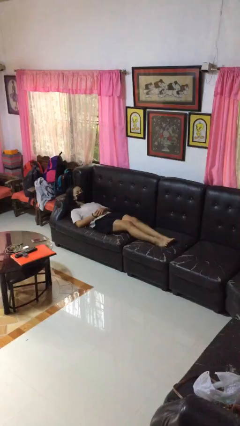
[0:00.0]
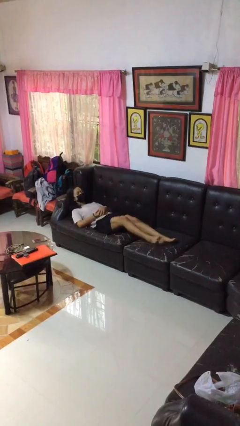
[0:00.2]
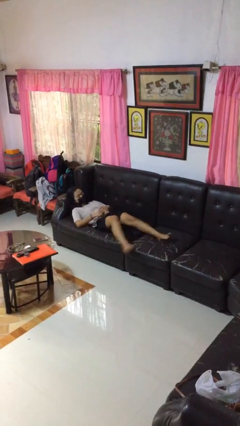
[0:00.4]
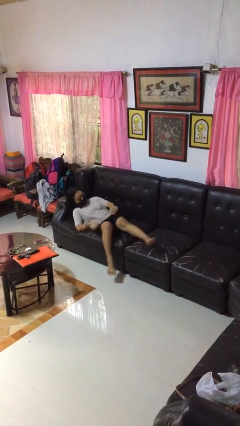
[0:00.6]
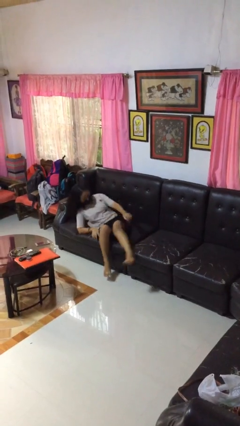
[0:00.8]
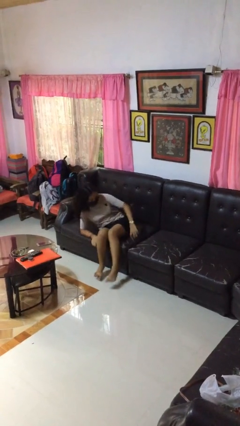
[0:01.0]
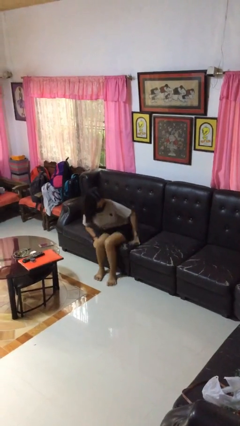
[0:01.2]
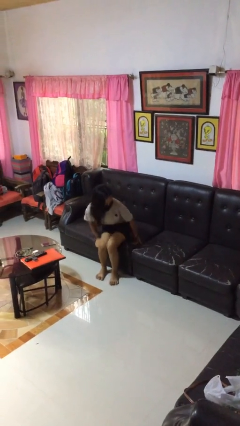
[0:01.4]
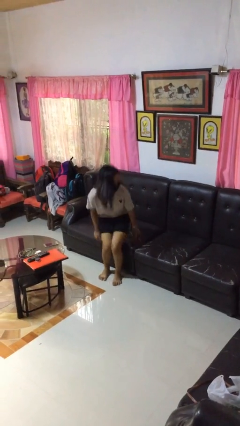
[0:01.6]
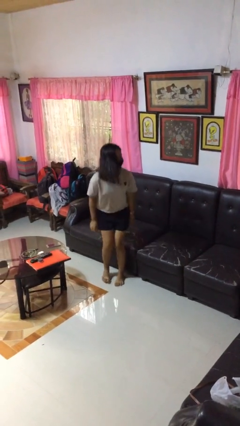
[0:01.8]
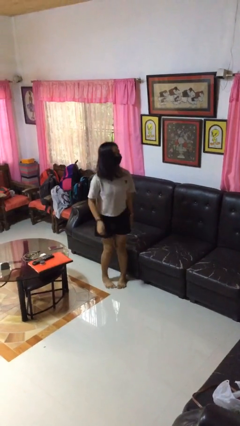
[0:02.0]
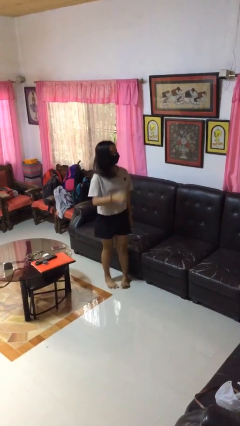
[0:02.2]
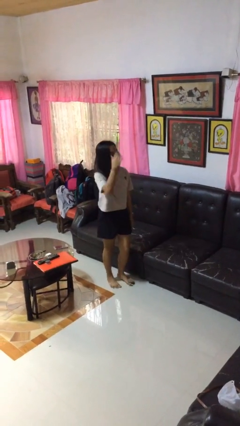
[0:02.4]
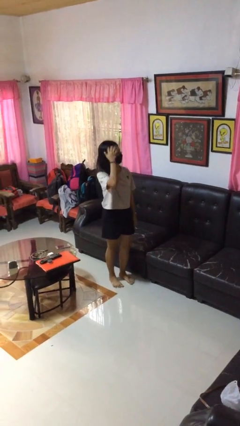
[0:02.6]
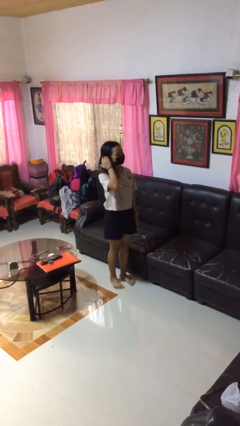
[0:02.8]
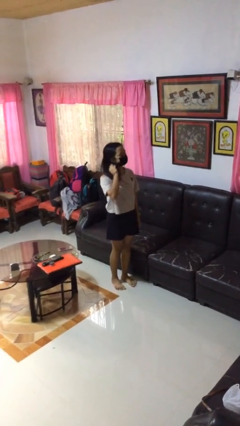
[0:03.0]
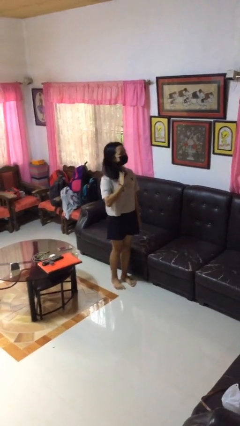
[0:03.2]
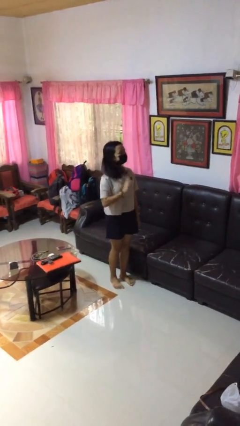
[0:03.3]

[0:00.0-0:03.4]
person stands up

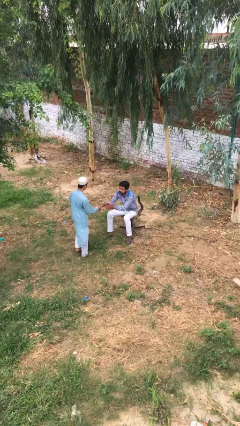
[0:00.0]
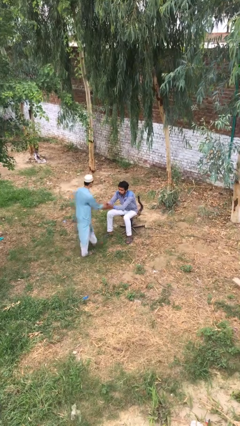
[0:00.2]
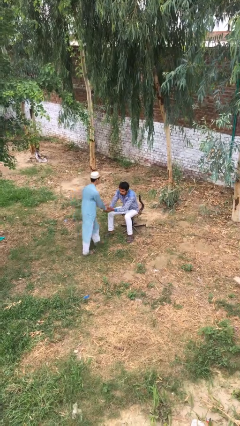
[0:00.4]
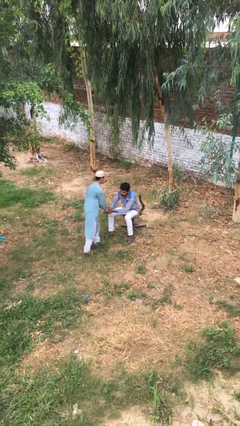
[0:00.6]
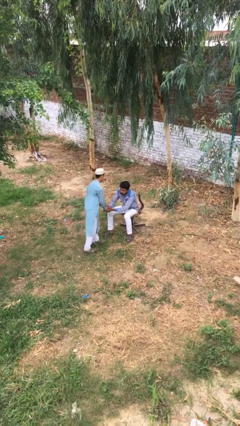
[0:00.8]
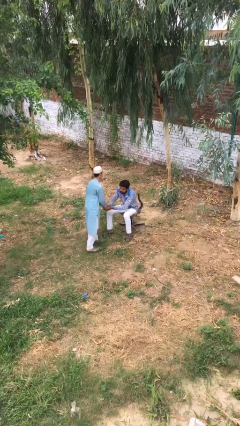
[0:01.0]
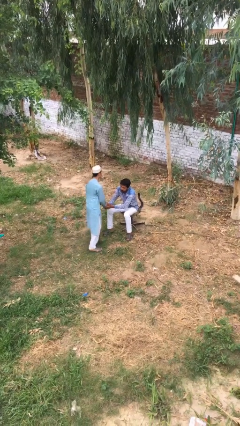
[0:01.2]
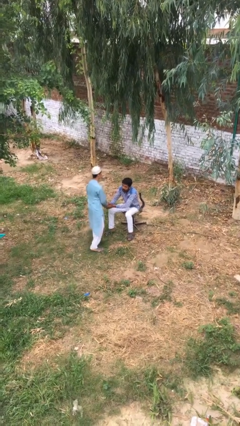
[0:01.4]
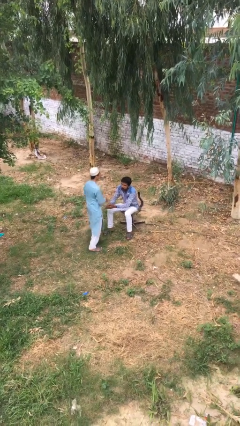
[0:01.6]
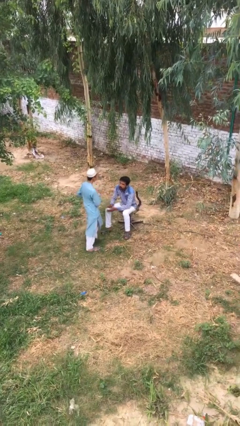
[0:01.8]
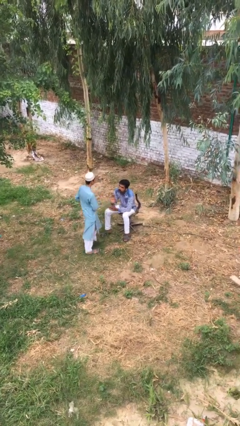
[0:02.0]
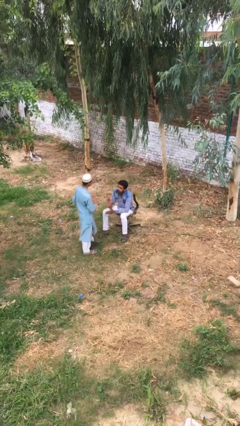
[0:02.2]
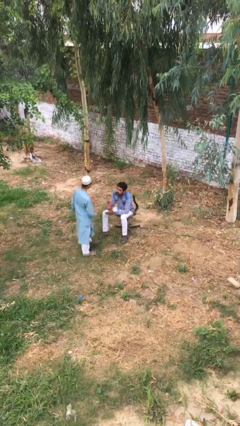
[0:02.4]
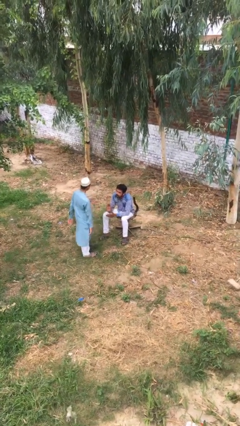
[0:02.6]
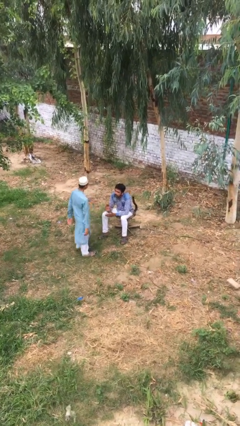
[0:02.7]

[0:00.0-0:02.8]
person shakes hand

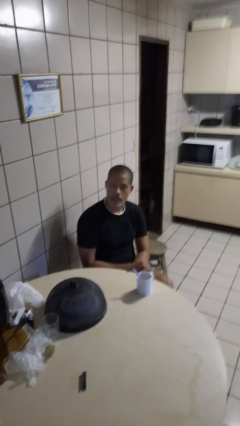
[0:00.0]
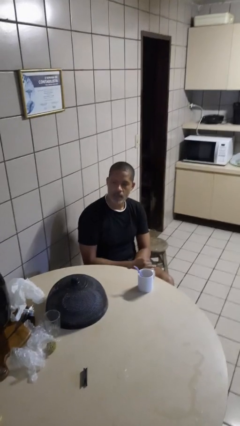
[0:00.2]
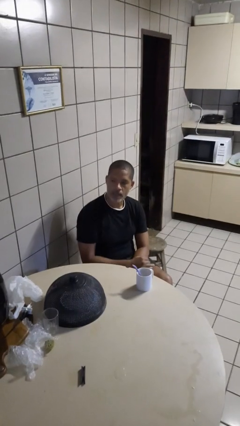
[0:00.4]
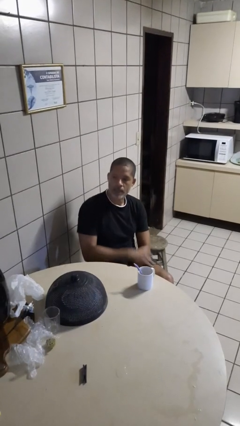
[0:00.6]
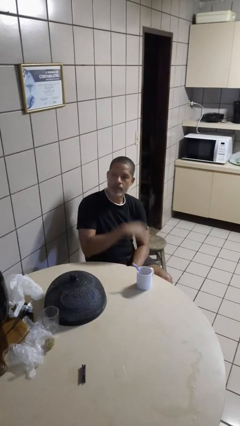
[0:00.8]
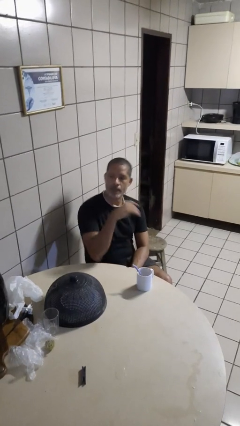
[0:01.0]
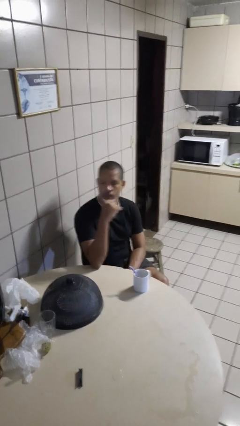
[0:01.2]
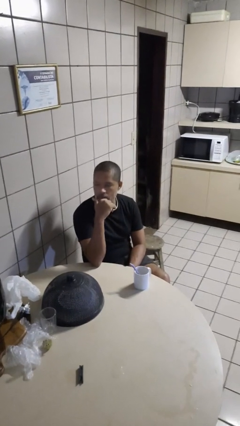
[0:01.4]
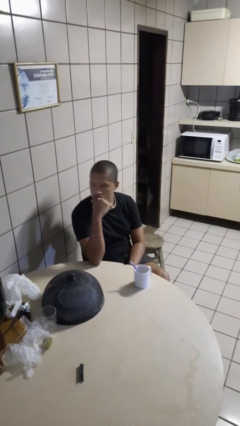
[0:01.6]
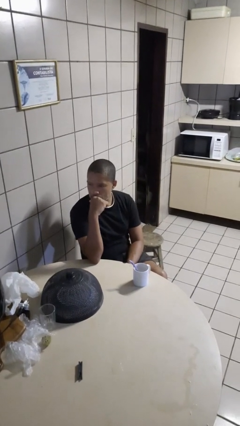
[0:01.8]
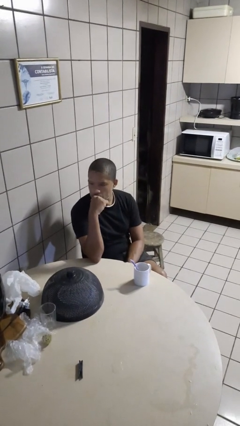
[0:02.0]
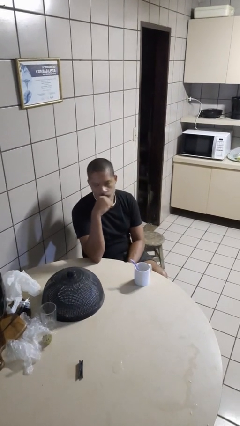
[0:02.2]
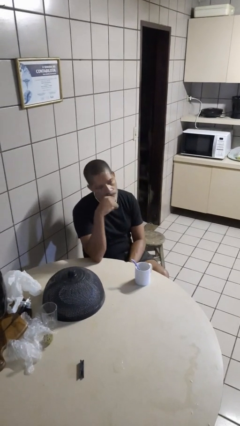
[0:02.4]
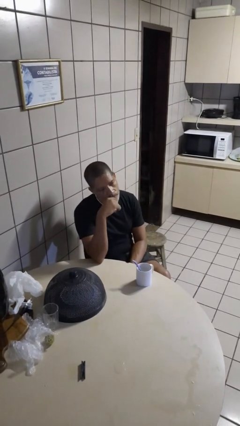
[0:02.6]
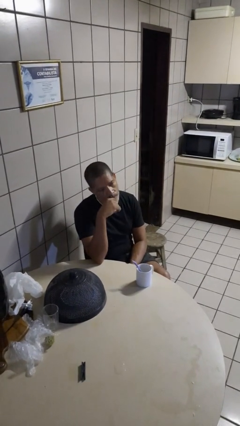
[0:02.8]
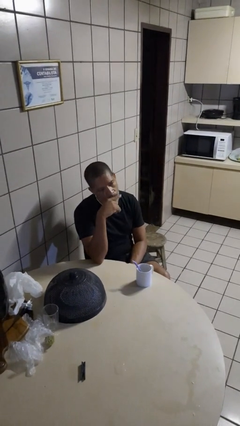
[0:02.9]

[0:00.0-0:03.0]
person strokes chin

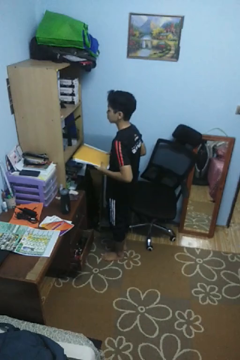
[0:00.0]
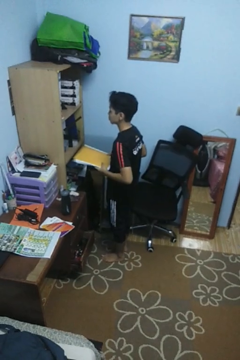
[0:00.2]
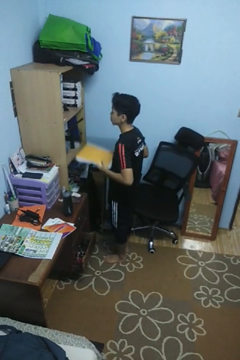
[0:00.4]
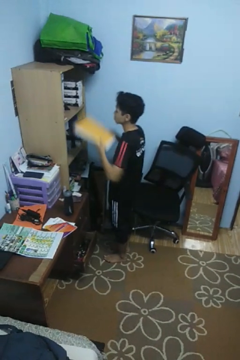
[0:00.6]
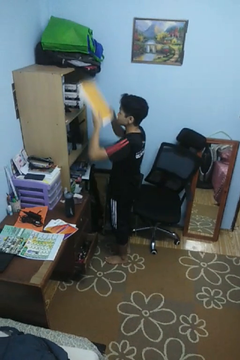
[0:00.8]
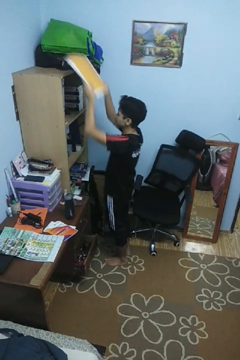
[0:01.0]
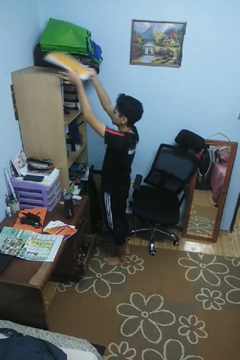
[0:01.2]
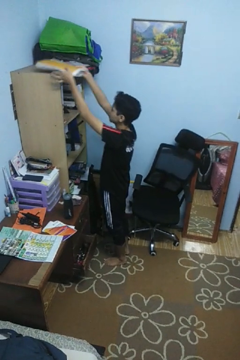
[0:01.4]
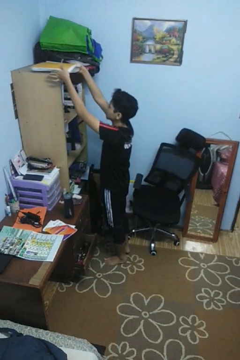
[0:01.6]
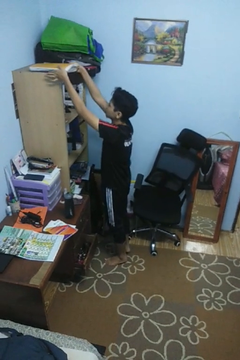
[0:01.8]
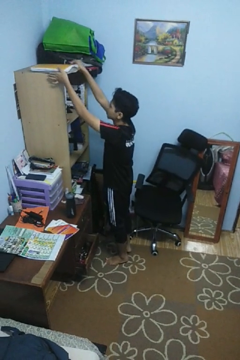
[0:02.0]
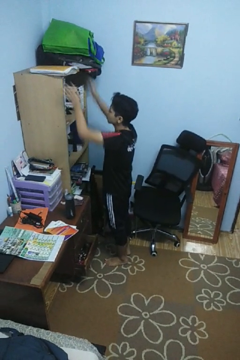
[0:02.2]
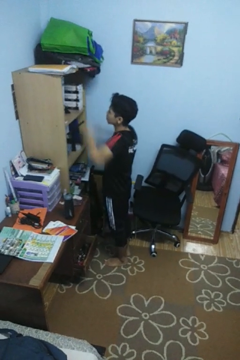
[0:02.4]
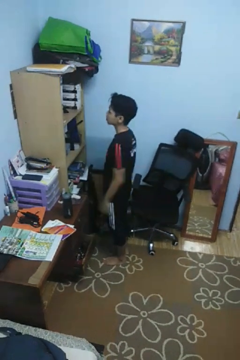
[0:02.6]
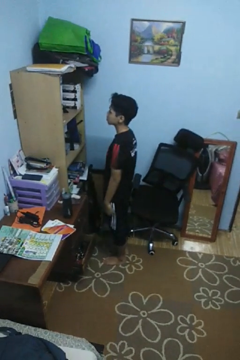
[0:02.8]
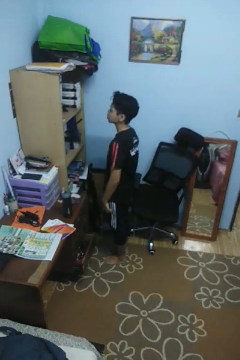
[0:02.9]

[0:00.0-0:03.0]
person puts down object on shelf

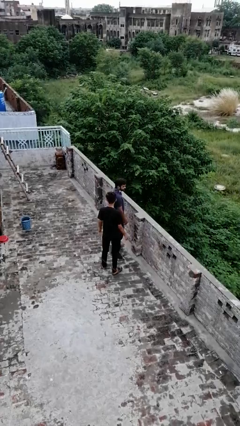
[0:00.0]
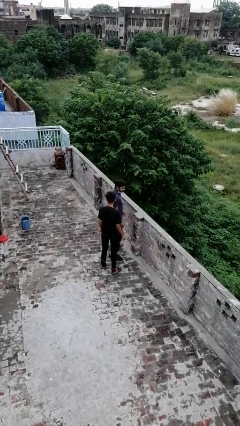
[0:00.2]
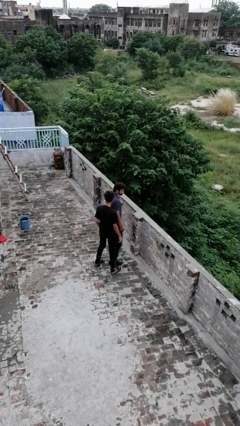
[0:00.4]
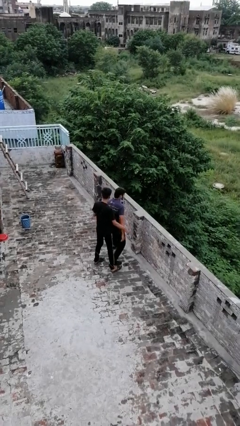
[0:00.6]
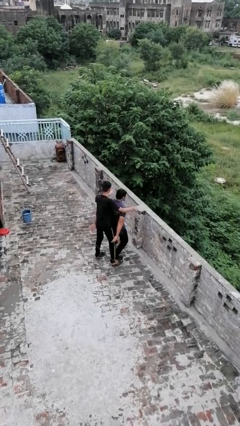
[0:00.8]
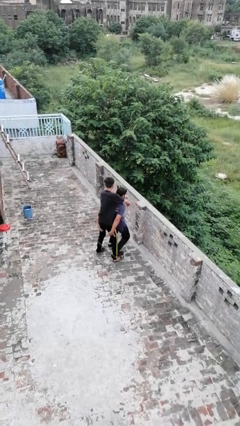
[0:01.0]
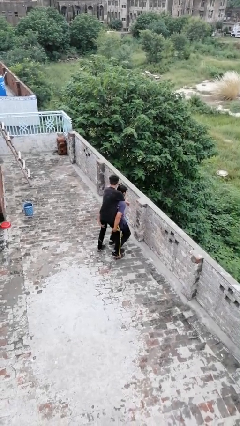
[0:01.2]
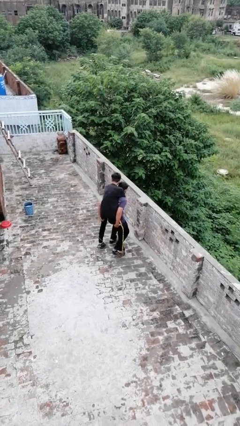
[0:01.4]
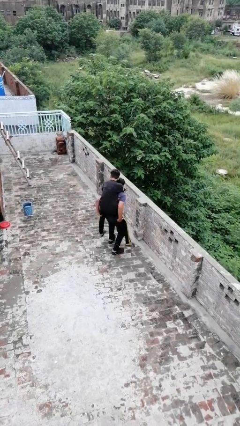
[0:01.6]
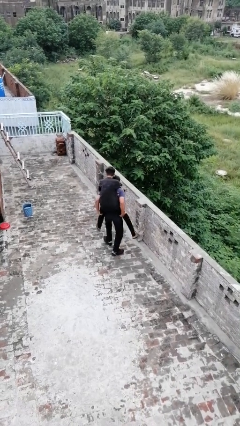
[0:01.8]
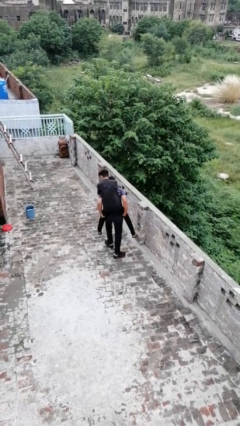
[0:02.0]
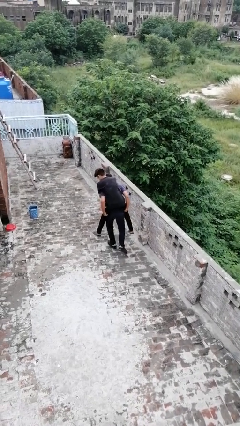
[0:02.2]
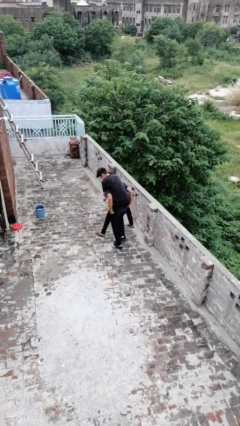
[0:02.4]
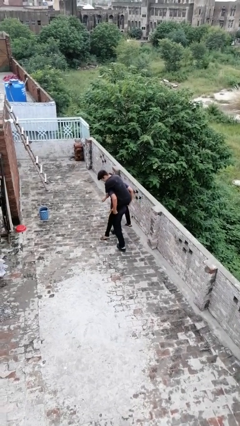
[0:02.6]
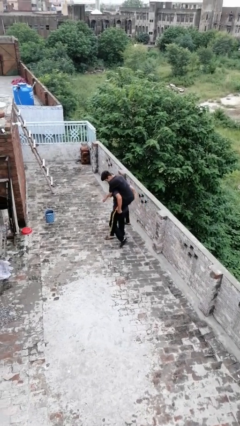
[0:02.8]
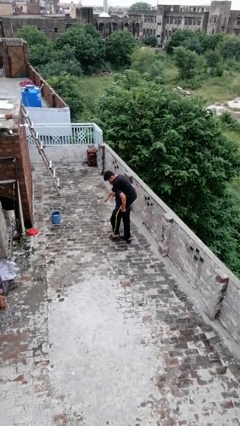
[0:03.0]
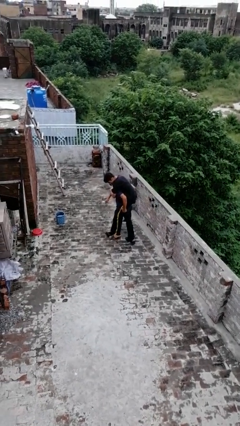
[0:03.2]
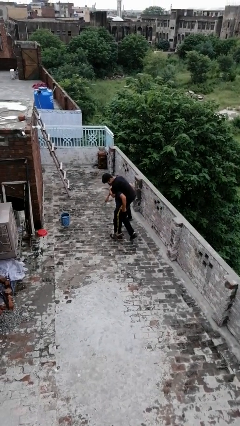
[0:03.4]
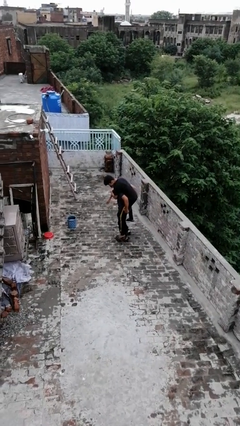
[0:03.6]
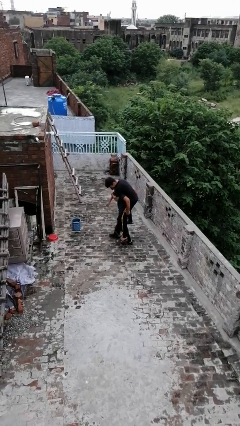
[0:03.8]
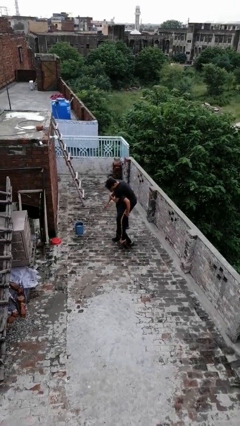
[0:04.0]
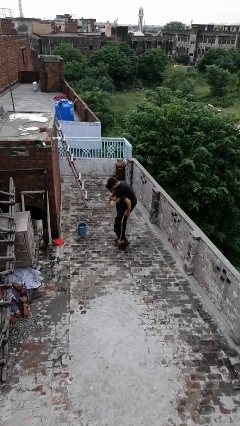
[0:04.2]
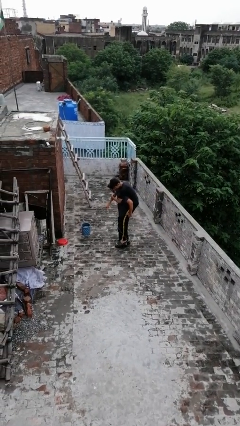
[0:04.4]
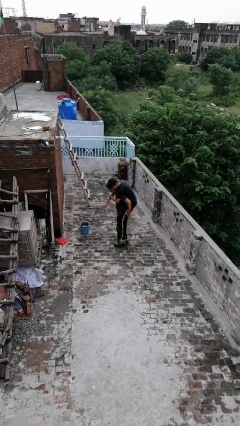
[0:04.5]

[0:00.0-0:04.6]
person carries person on back

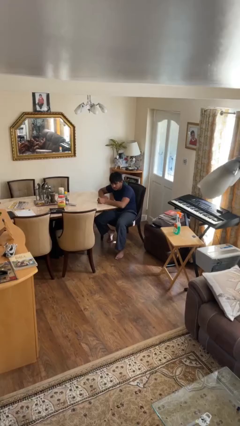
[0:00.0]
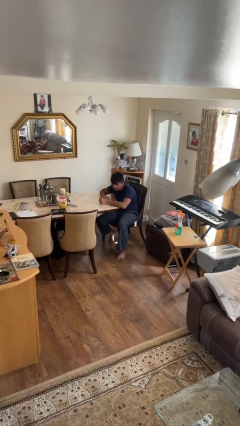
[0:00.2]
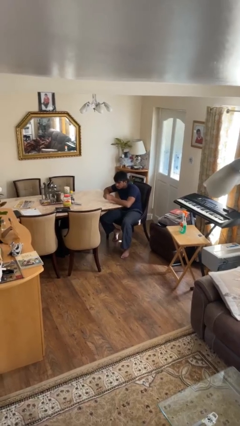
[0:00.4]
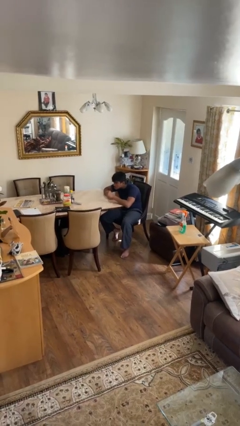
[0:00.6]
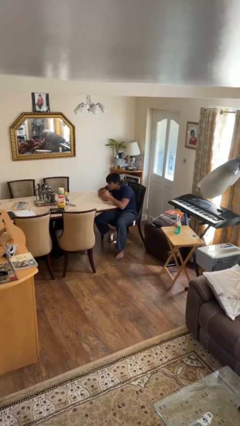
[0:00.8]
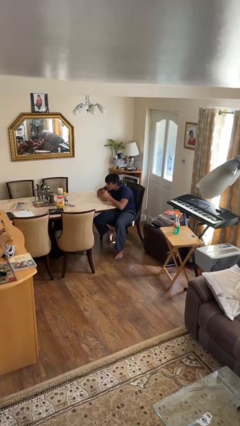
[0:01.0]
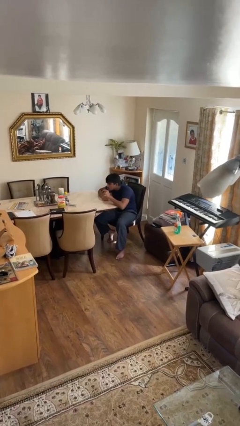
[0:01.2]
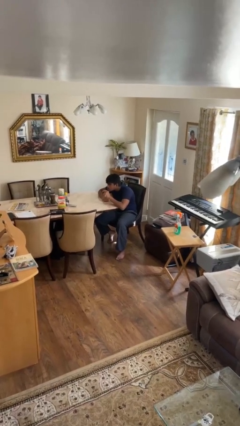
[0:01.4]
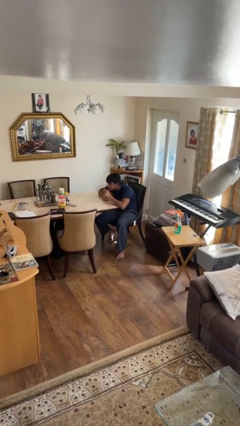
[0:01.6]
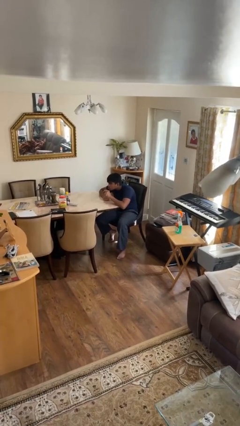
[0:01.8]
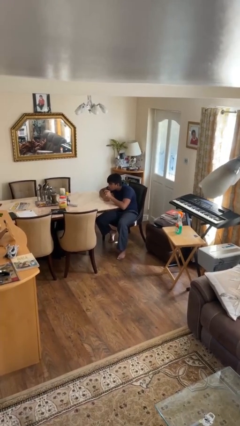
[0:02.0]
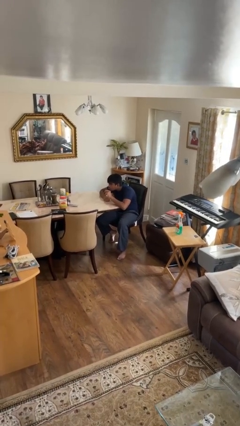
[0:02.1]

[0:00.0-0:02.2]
person applies lip makeup
